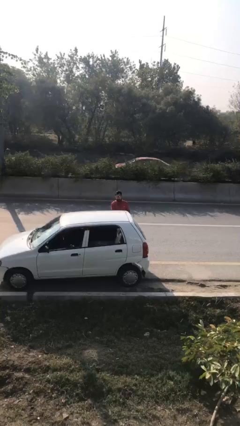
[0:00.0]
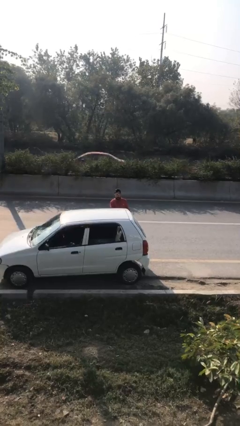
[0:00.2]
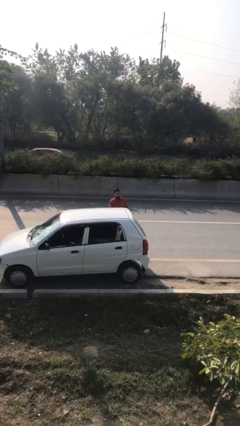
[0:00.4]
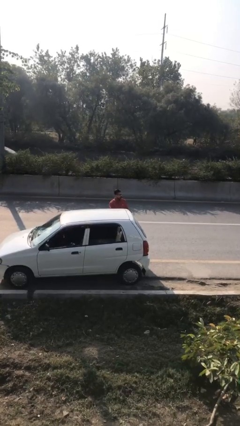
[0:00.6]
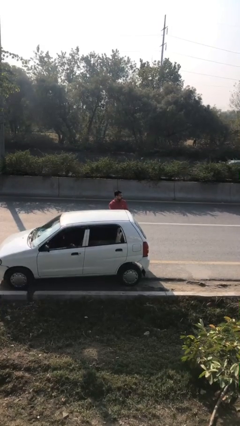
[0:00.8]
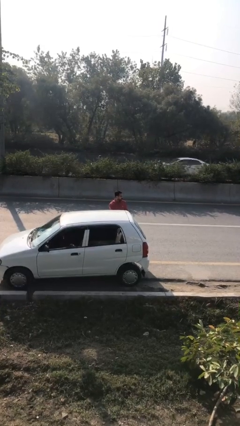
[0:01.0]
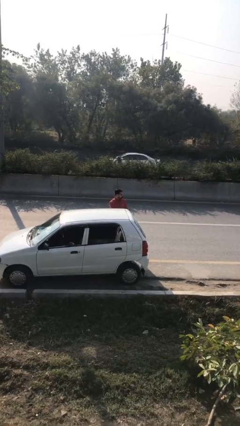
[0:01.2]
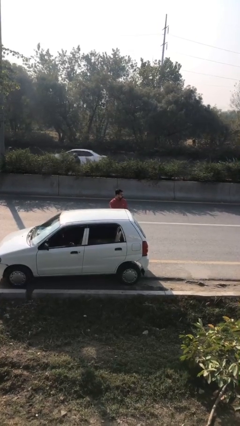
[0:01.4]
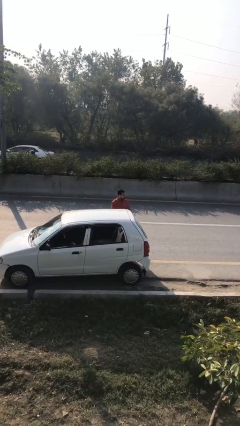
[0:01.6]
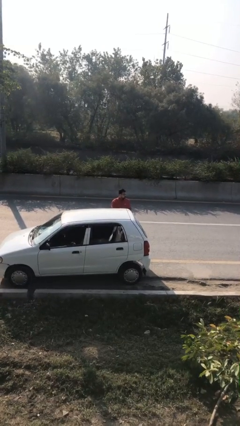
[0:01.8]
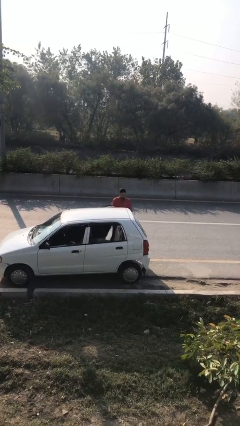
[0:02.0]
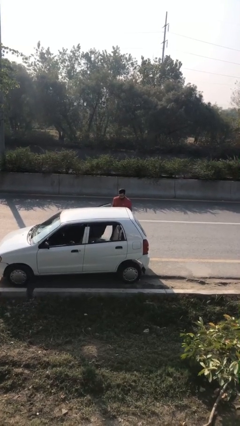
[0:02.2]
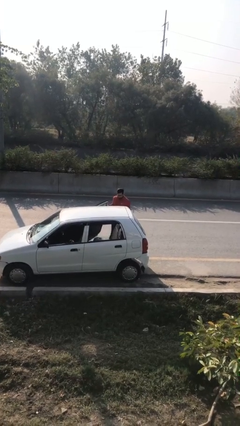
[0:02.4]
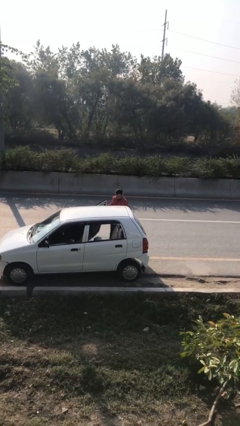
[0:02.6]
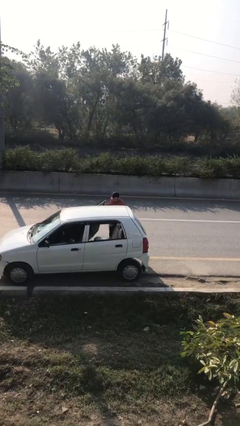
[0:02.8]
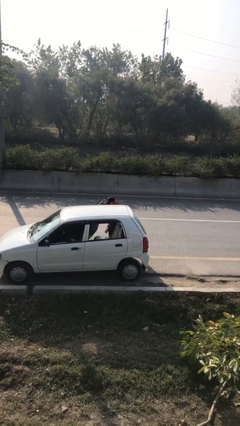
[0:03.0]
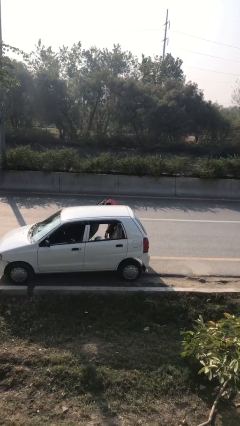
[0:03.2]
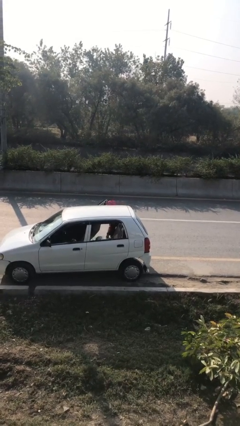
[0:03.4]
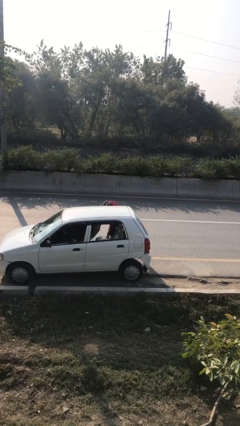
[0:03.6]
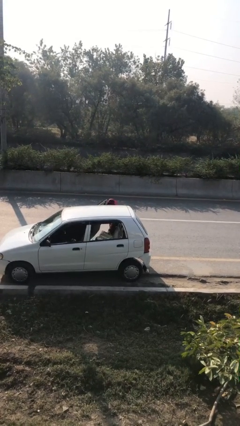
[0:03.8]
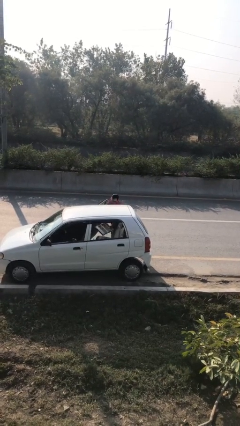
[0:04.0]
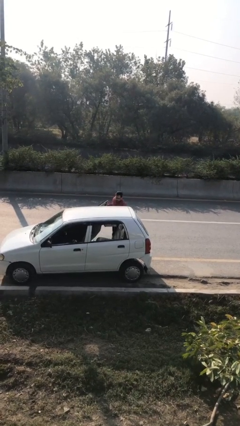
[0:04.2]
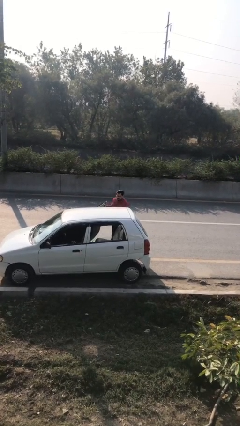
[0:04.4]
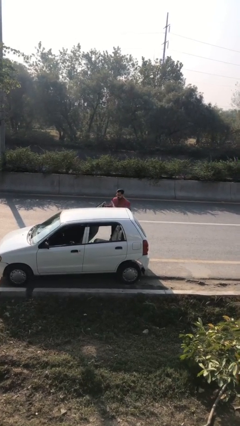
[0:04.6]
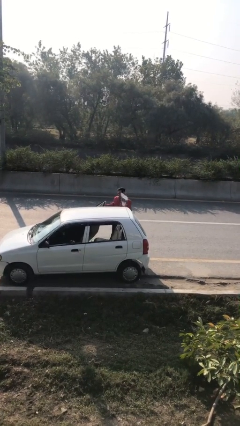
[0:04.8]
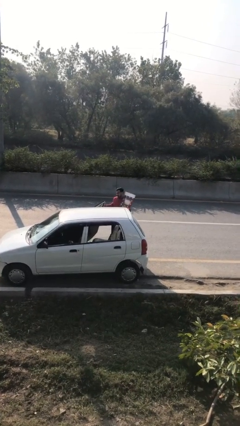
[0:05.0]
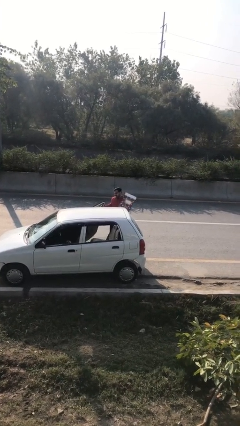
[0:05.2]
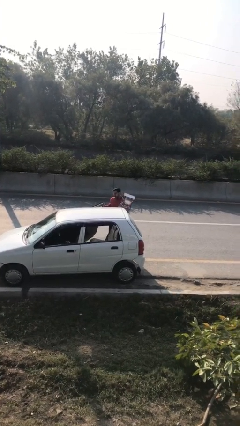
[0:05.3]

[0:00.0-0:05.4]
person unloads car

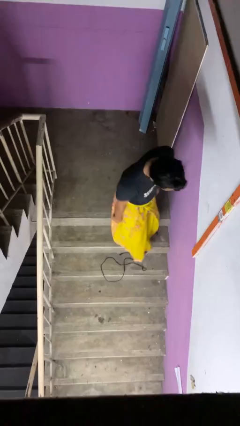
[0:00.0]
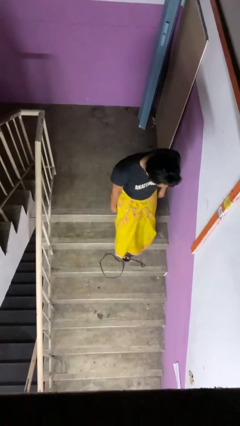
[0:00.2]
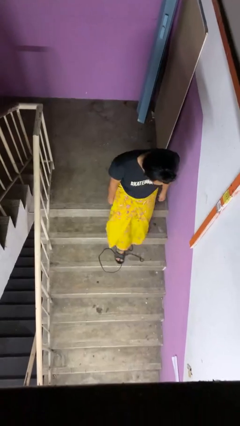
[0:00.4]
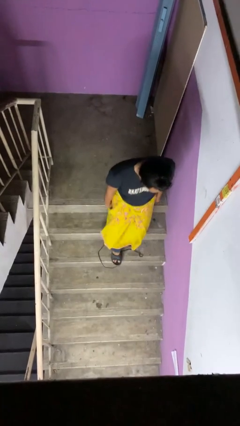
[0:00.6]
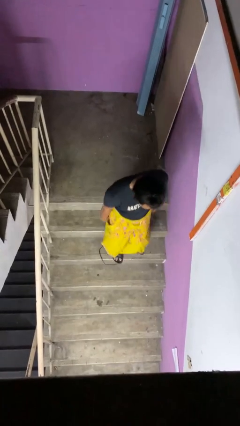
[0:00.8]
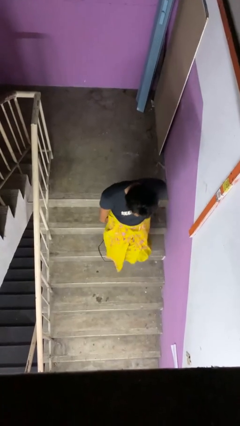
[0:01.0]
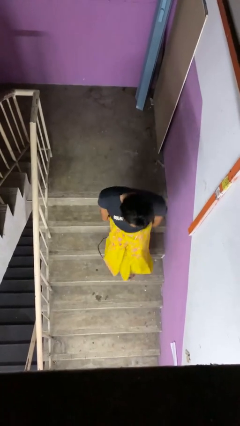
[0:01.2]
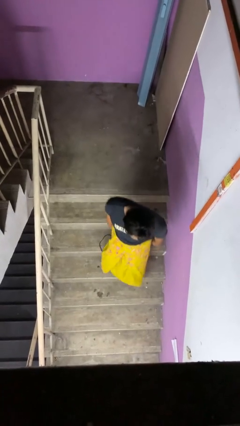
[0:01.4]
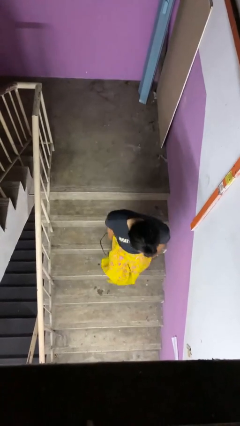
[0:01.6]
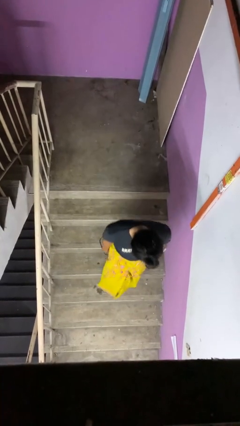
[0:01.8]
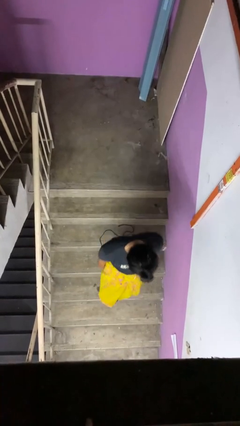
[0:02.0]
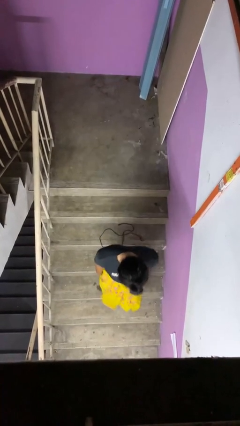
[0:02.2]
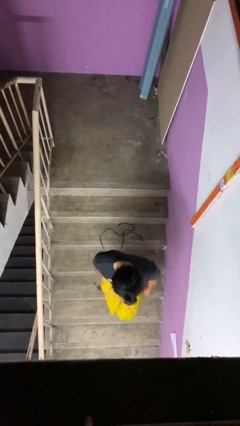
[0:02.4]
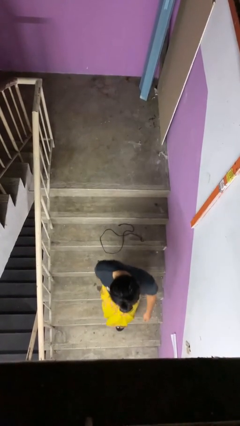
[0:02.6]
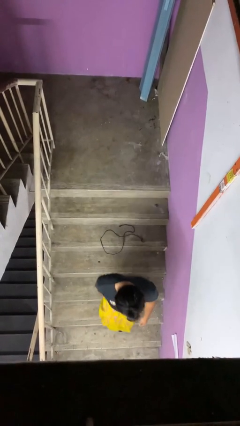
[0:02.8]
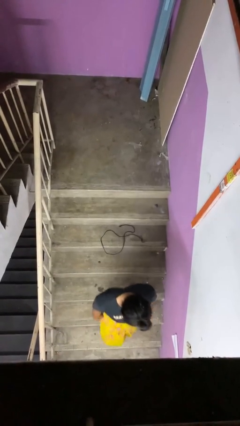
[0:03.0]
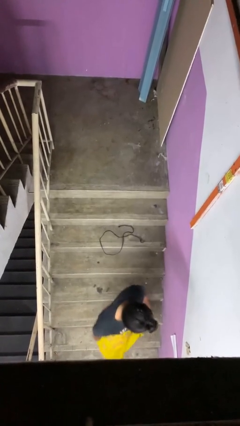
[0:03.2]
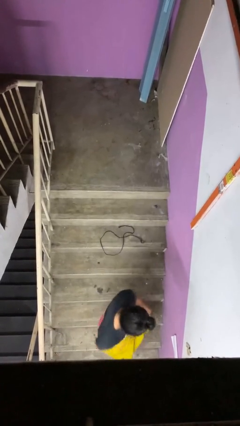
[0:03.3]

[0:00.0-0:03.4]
person climbs down stairs

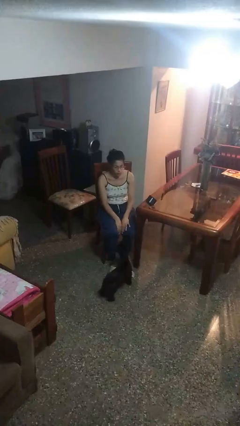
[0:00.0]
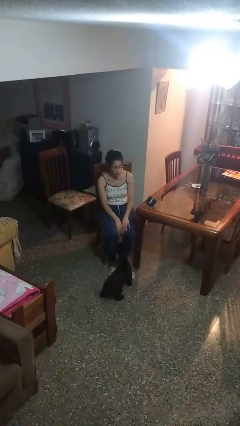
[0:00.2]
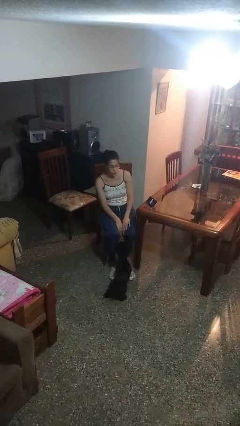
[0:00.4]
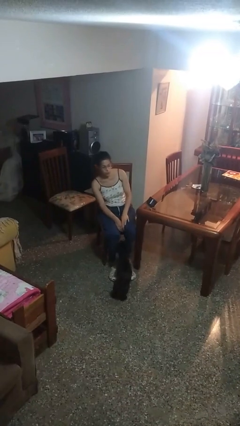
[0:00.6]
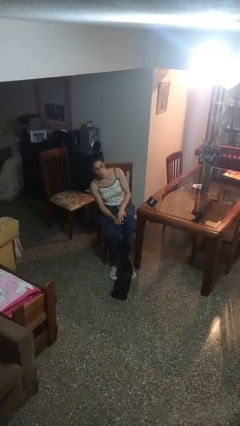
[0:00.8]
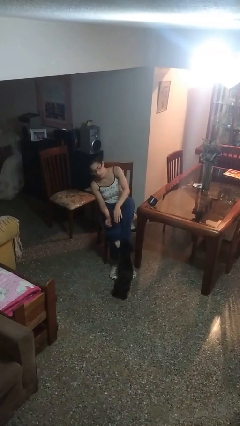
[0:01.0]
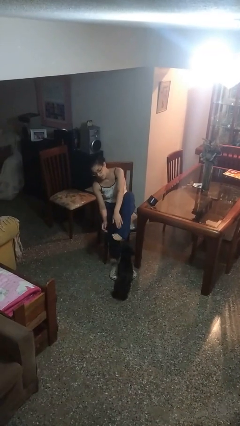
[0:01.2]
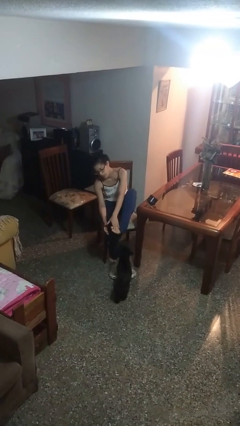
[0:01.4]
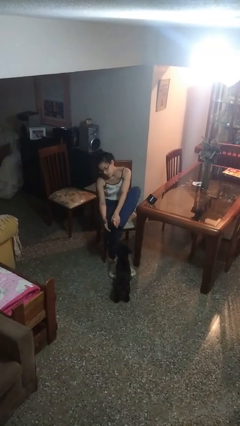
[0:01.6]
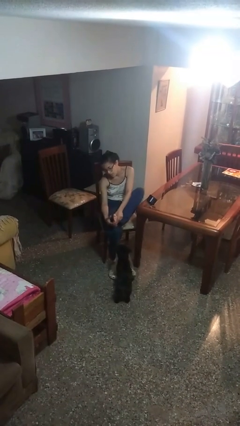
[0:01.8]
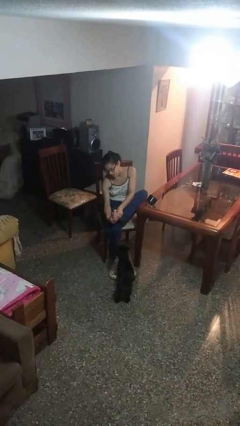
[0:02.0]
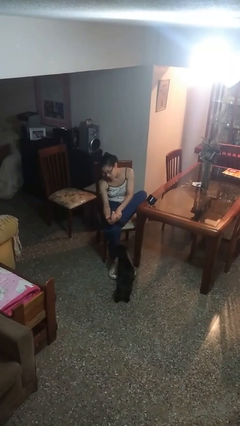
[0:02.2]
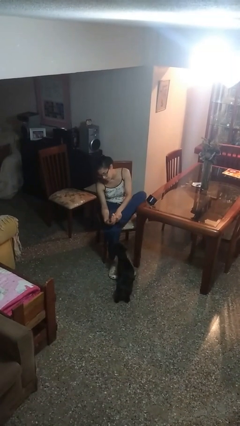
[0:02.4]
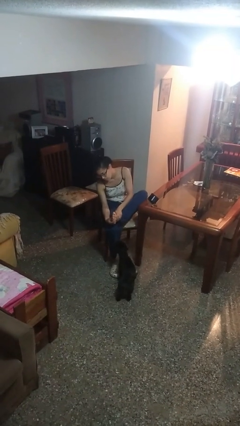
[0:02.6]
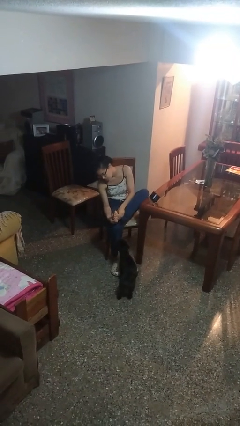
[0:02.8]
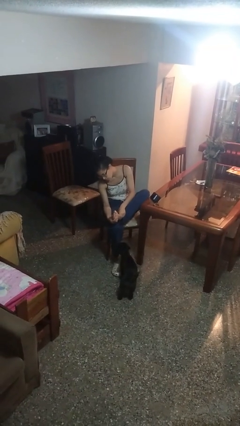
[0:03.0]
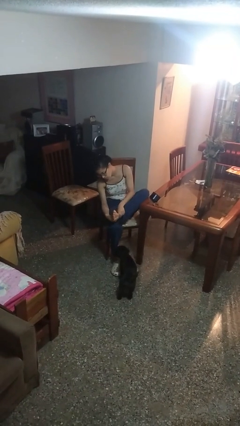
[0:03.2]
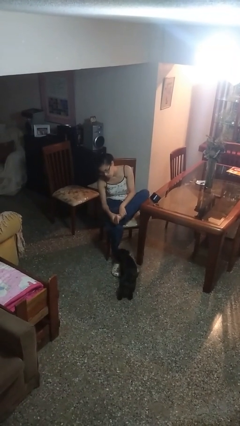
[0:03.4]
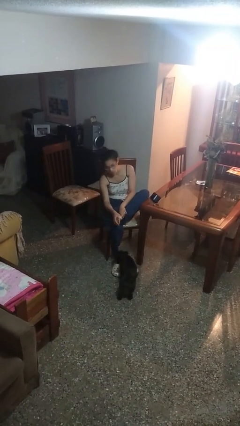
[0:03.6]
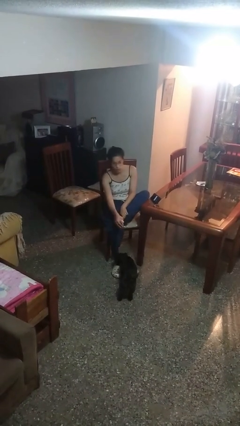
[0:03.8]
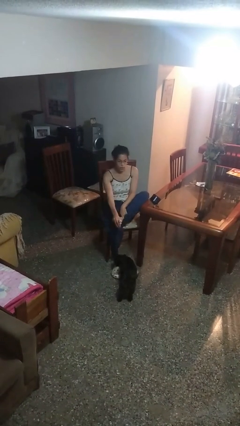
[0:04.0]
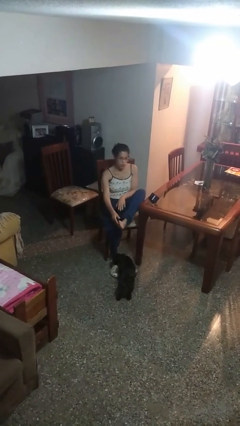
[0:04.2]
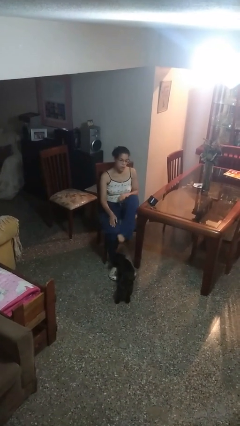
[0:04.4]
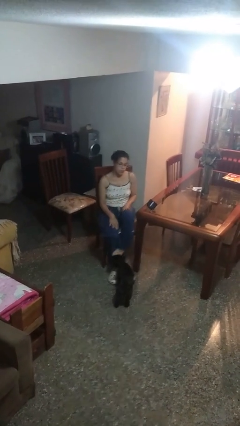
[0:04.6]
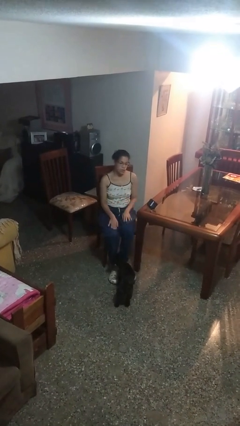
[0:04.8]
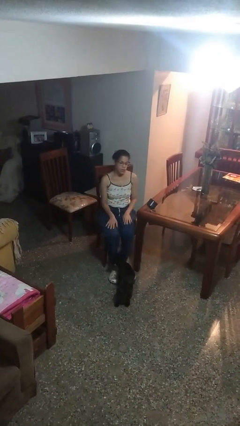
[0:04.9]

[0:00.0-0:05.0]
person rubs foot

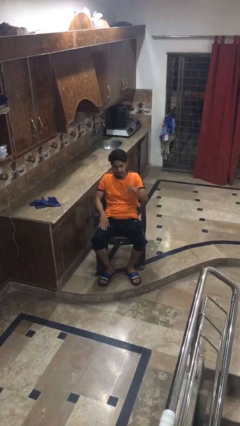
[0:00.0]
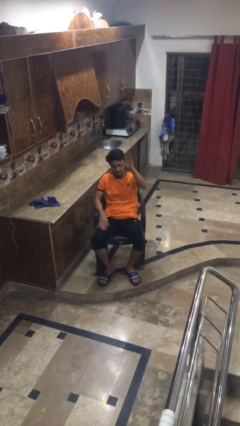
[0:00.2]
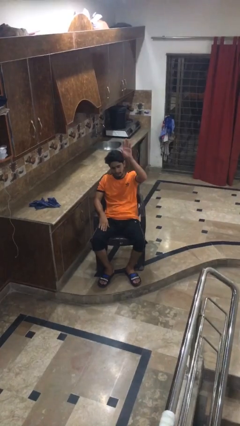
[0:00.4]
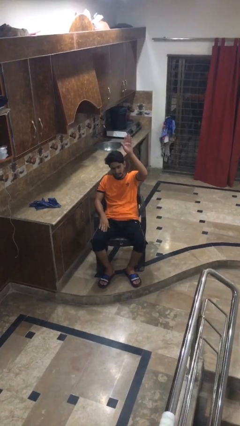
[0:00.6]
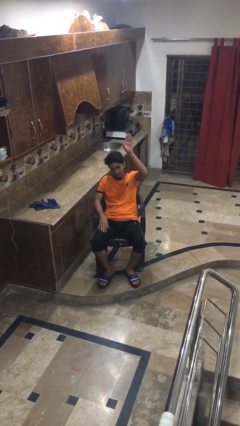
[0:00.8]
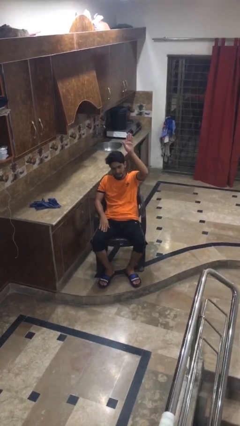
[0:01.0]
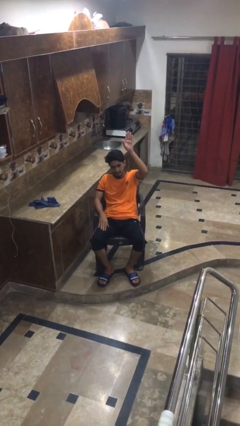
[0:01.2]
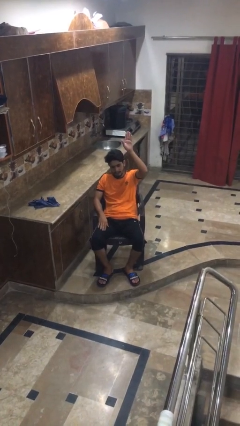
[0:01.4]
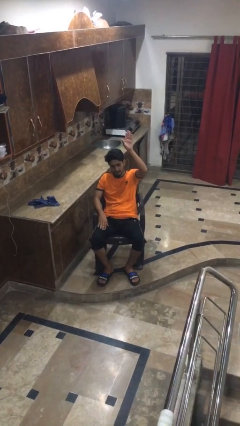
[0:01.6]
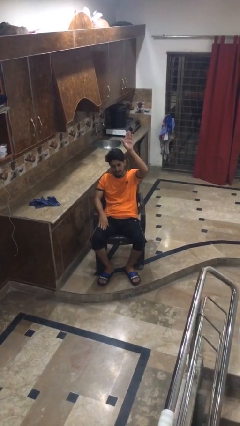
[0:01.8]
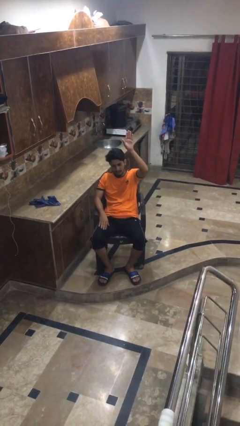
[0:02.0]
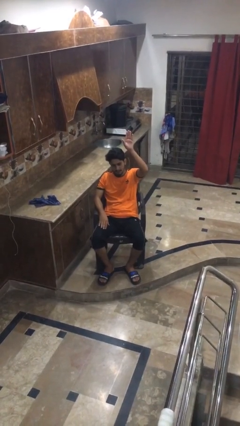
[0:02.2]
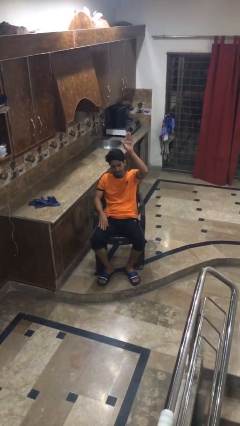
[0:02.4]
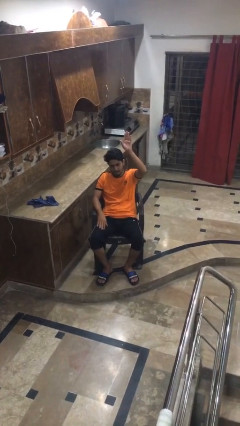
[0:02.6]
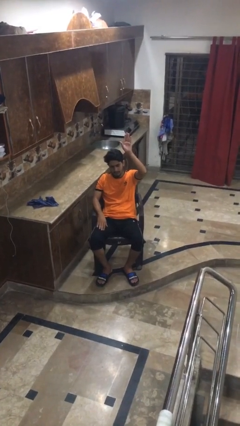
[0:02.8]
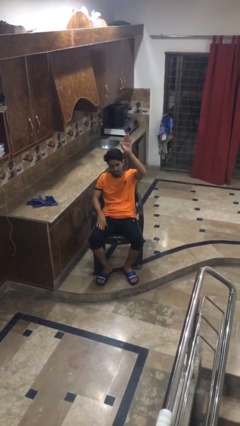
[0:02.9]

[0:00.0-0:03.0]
person gestures raise hand

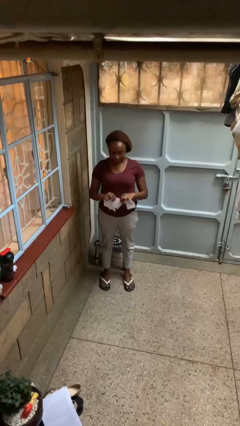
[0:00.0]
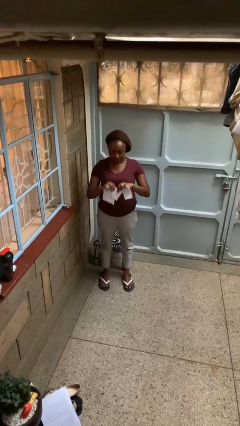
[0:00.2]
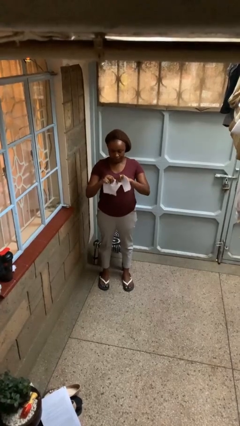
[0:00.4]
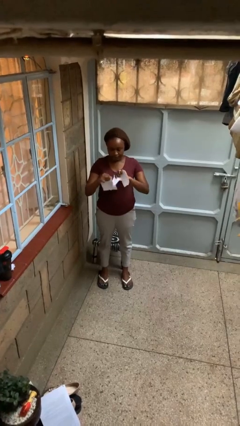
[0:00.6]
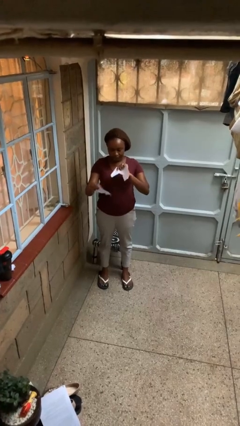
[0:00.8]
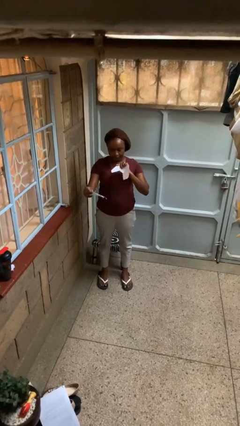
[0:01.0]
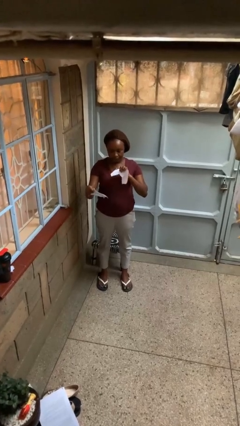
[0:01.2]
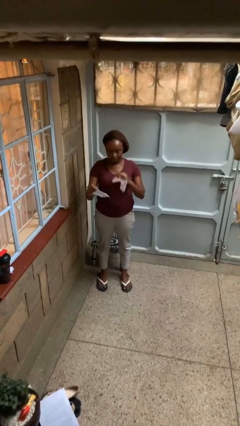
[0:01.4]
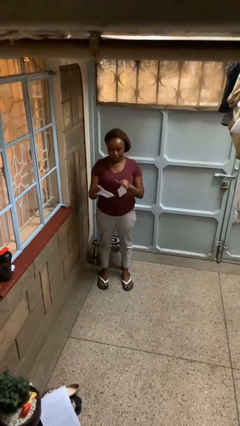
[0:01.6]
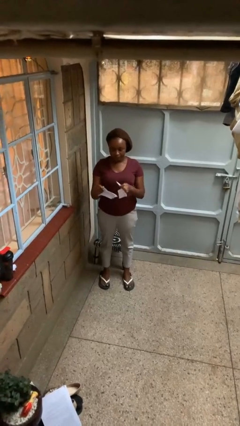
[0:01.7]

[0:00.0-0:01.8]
person tears paper
